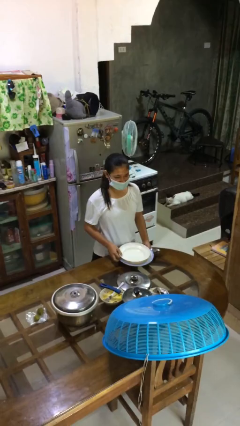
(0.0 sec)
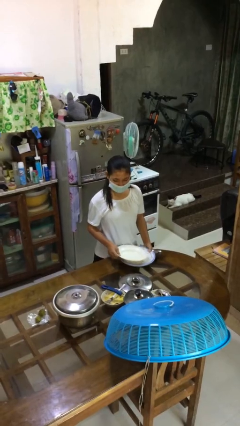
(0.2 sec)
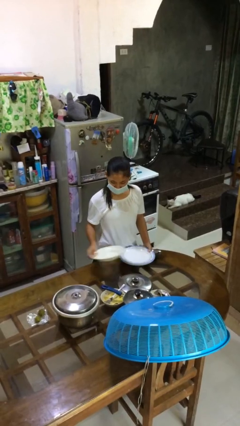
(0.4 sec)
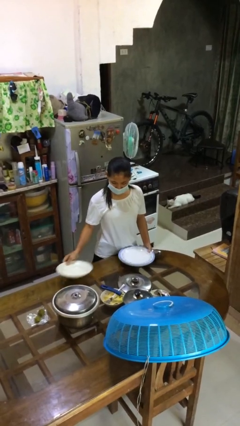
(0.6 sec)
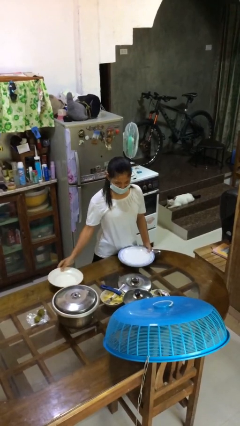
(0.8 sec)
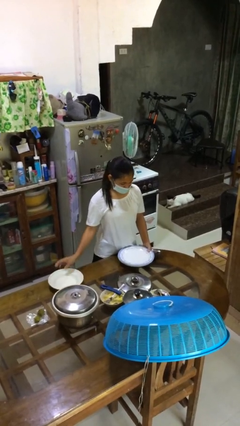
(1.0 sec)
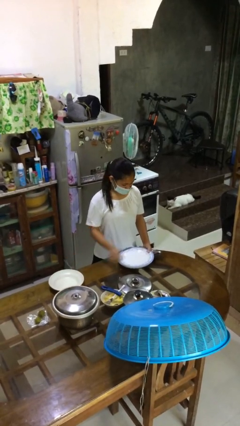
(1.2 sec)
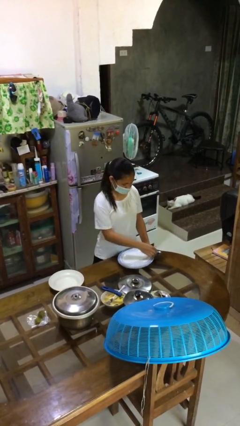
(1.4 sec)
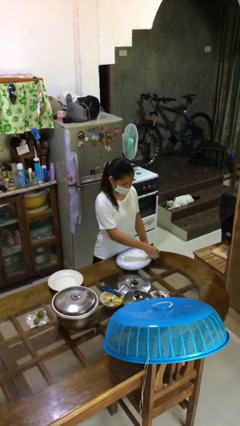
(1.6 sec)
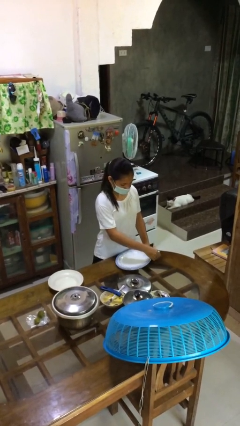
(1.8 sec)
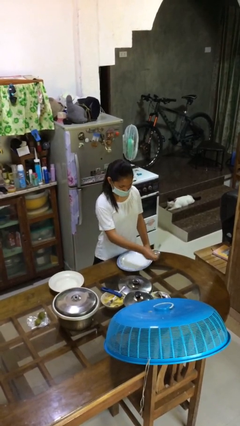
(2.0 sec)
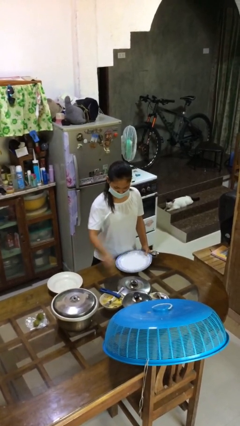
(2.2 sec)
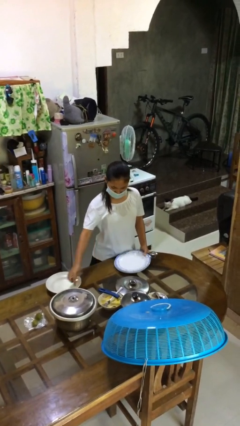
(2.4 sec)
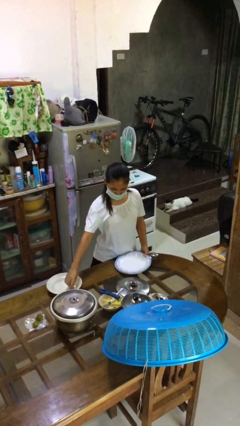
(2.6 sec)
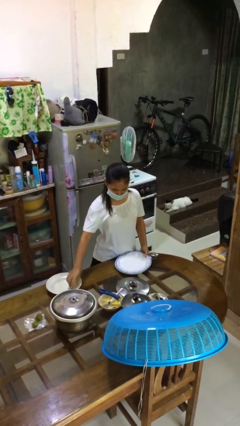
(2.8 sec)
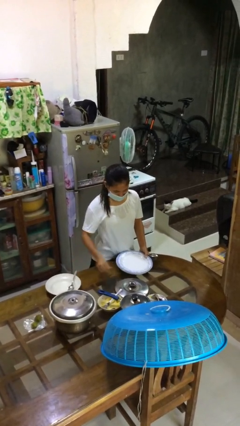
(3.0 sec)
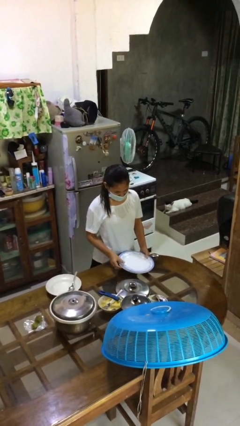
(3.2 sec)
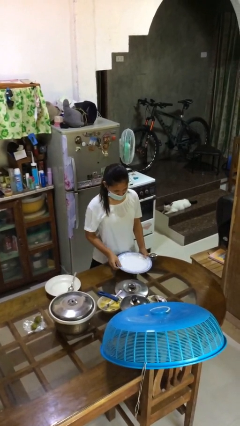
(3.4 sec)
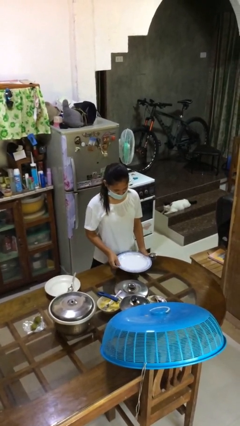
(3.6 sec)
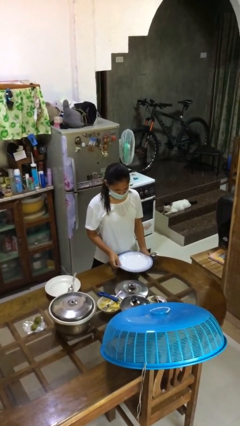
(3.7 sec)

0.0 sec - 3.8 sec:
person sets table

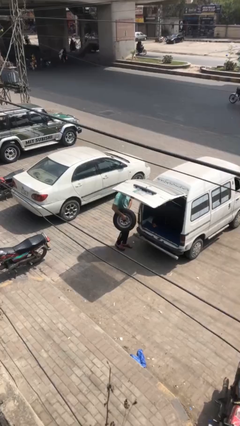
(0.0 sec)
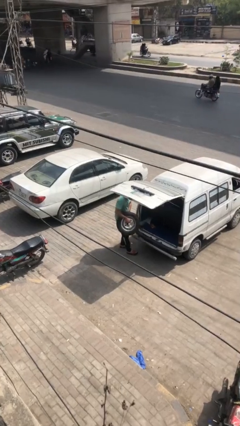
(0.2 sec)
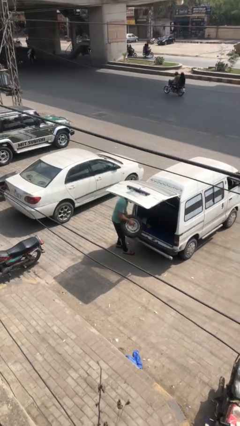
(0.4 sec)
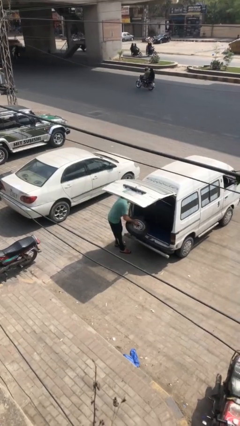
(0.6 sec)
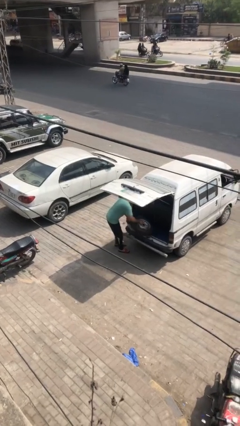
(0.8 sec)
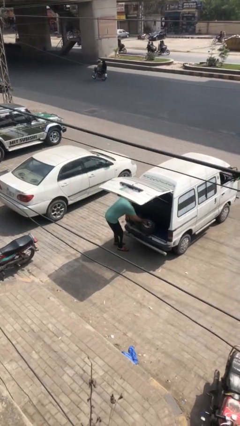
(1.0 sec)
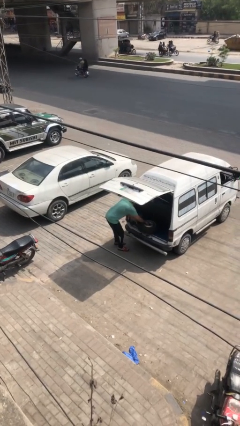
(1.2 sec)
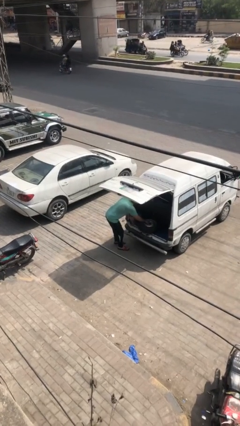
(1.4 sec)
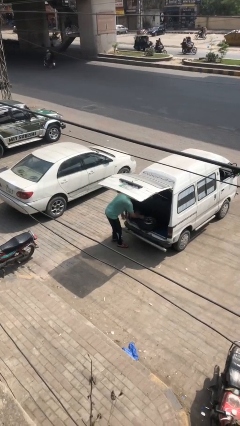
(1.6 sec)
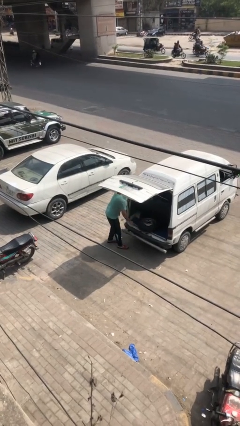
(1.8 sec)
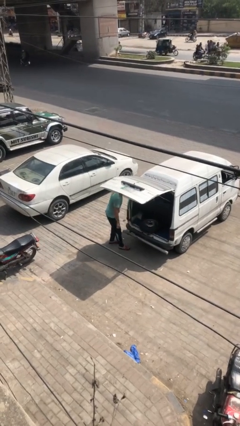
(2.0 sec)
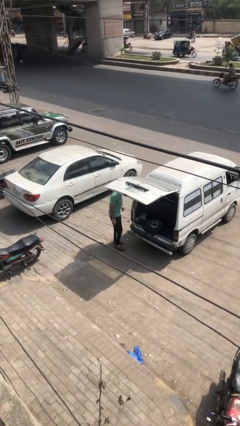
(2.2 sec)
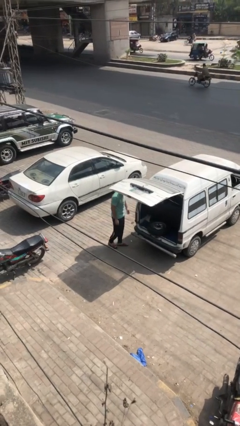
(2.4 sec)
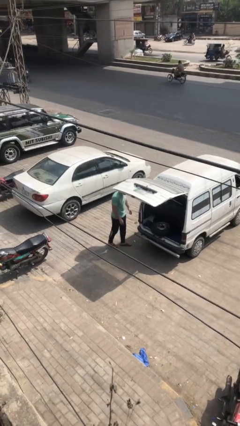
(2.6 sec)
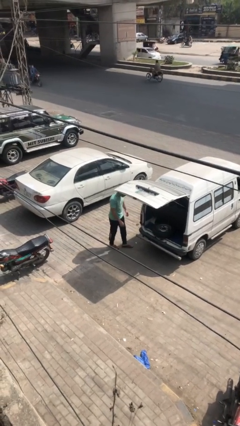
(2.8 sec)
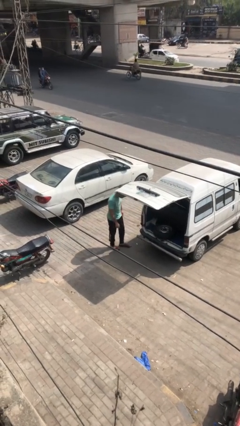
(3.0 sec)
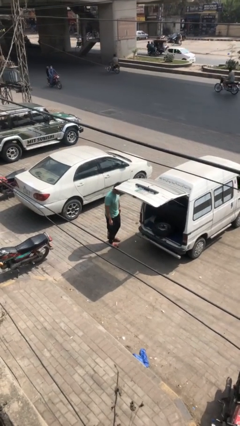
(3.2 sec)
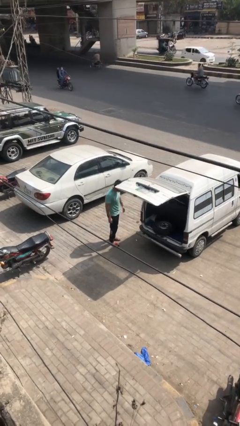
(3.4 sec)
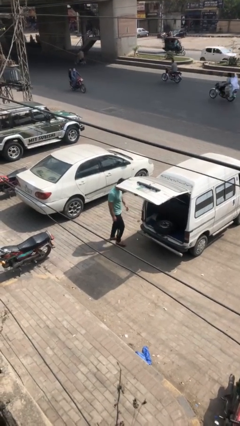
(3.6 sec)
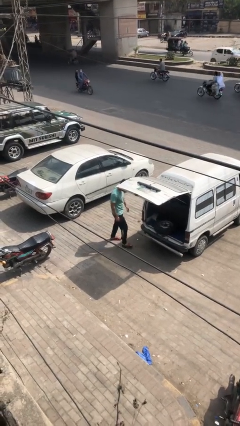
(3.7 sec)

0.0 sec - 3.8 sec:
person loads car

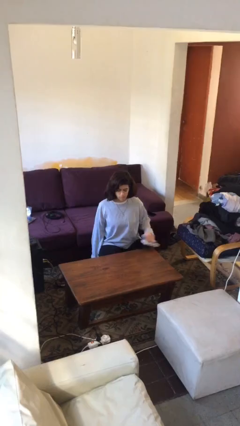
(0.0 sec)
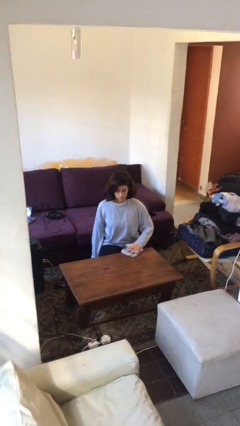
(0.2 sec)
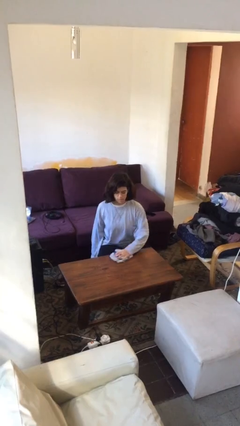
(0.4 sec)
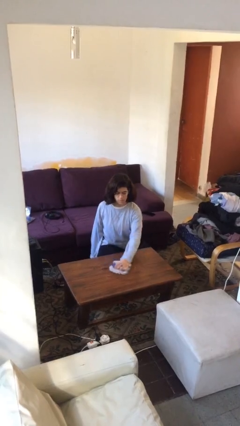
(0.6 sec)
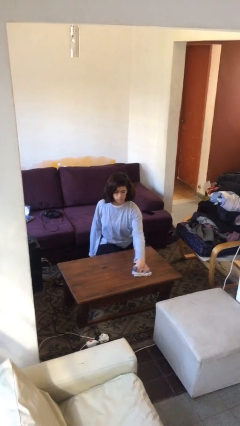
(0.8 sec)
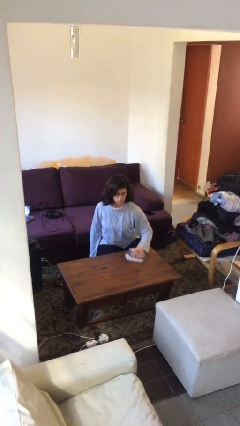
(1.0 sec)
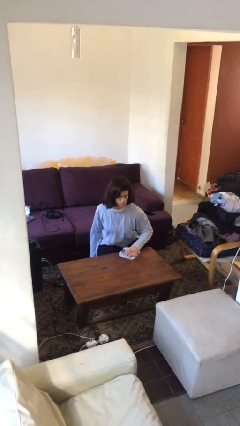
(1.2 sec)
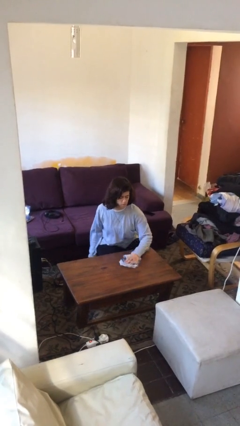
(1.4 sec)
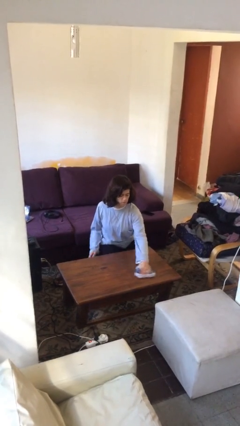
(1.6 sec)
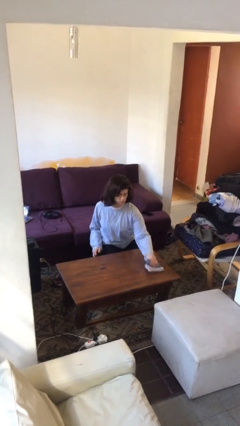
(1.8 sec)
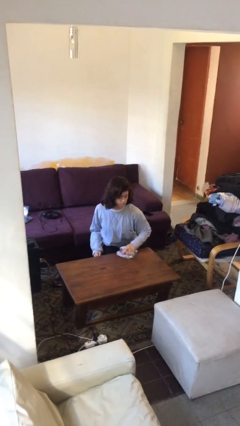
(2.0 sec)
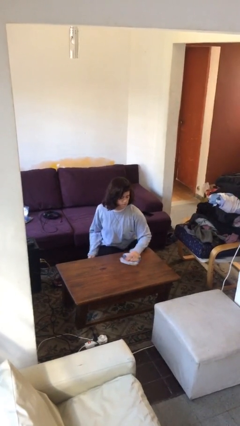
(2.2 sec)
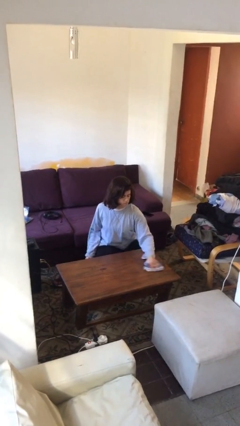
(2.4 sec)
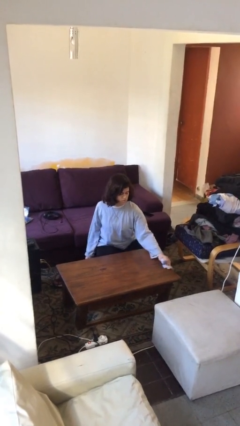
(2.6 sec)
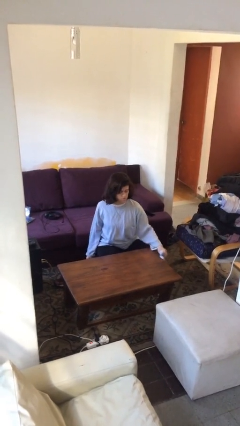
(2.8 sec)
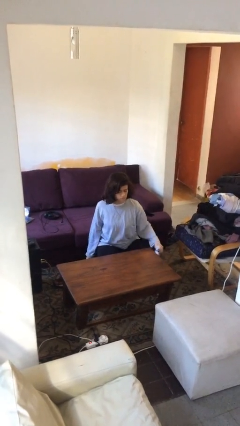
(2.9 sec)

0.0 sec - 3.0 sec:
person cleans table with rag

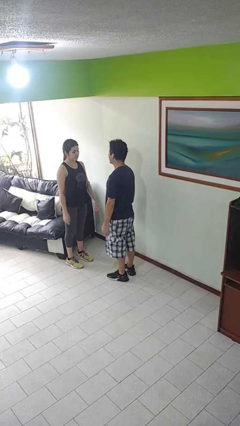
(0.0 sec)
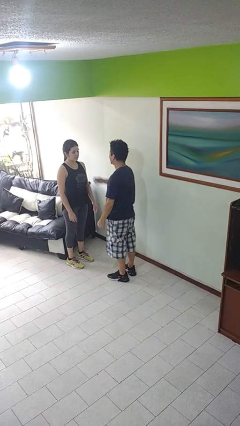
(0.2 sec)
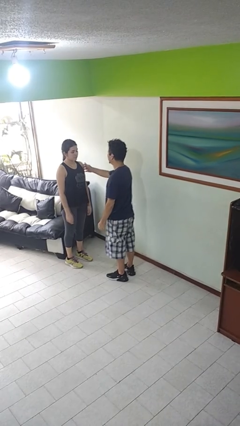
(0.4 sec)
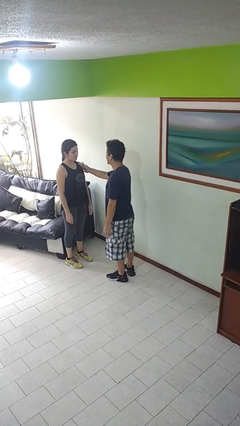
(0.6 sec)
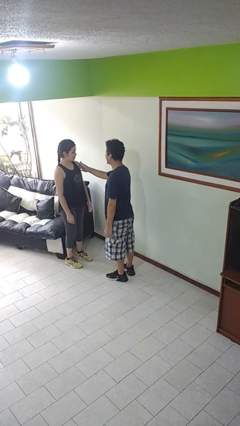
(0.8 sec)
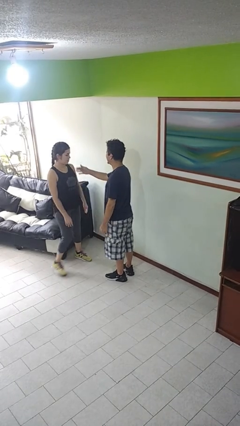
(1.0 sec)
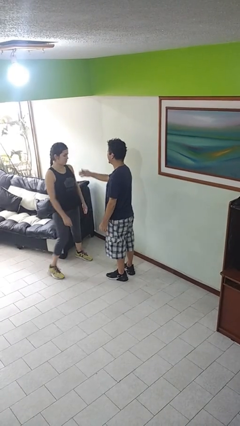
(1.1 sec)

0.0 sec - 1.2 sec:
person shoves person

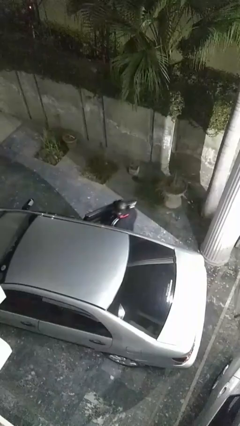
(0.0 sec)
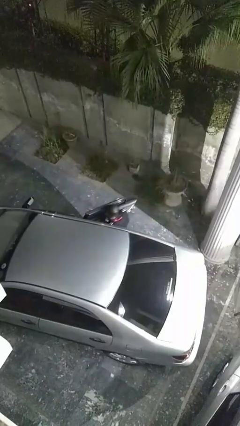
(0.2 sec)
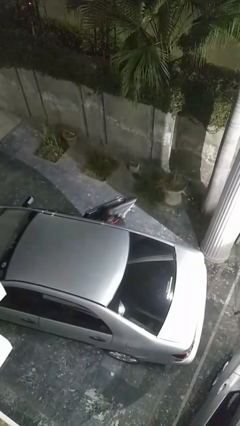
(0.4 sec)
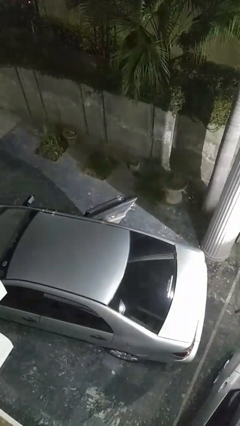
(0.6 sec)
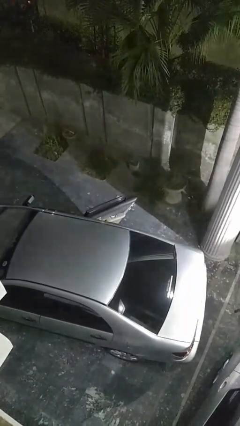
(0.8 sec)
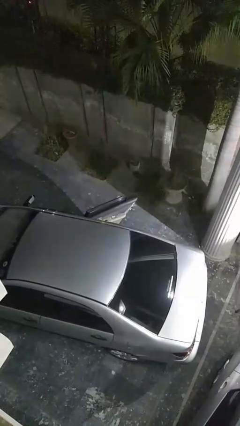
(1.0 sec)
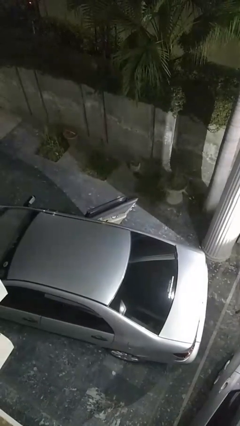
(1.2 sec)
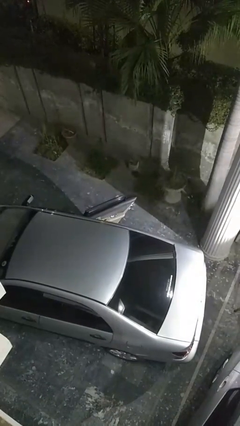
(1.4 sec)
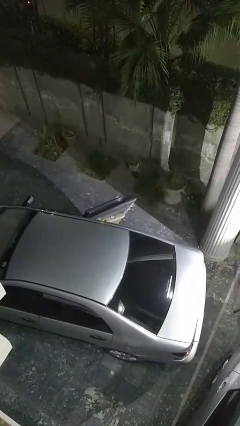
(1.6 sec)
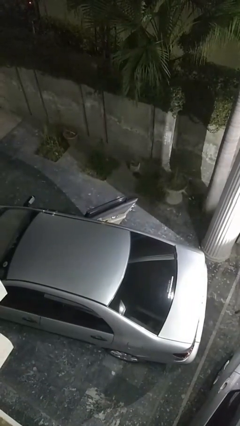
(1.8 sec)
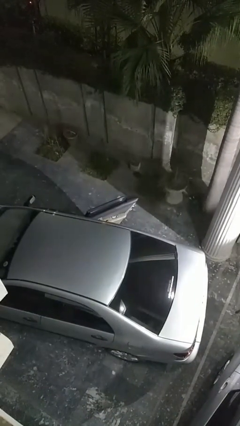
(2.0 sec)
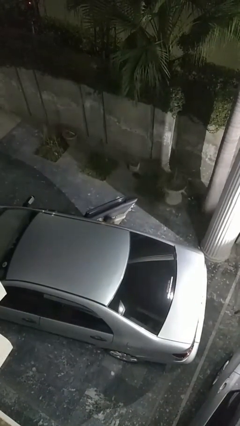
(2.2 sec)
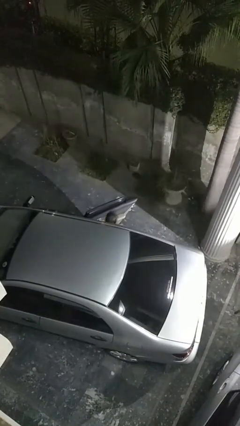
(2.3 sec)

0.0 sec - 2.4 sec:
person enters car

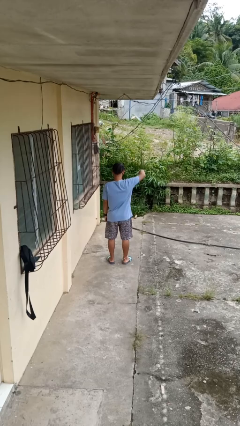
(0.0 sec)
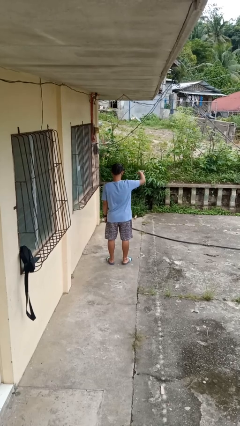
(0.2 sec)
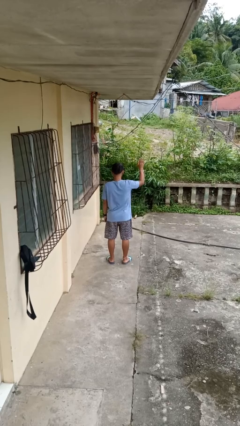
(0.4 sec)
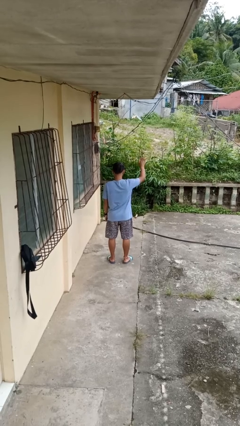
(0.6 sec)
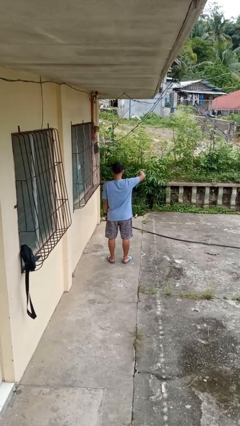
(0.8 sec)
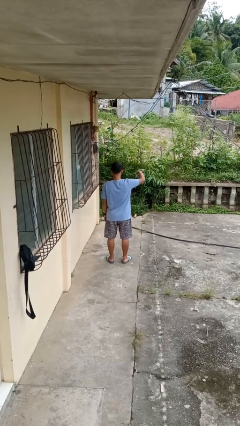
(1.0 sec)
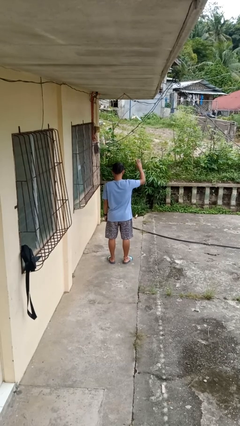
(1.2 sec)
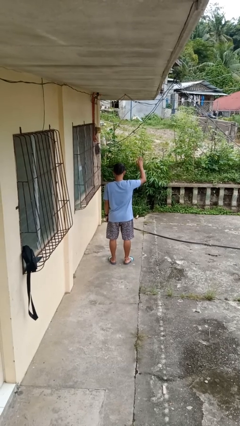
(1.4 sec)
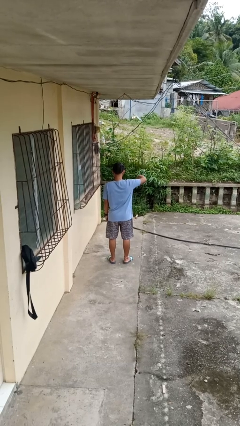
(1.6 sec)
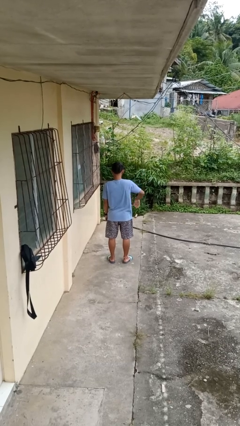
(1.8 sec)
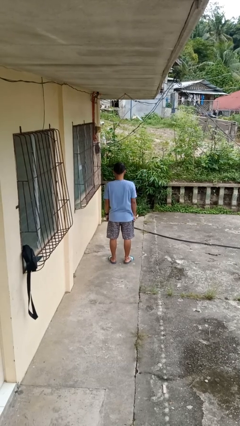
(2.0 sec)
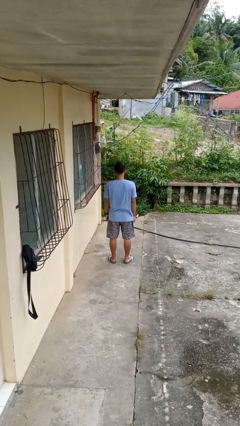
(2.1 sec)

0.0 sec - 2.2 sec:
person gestures come here

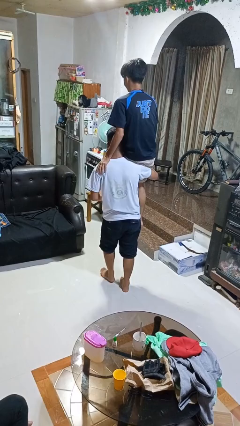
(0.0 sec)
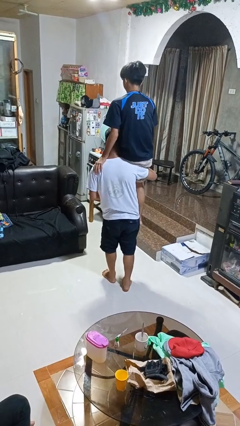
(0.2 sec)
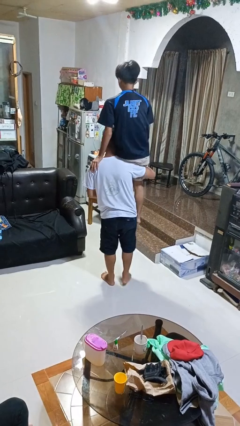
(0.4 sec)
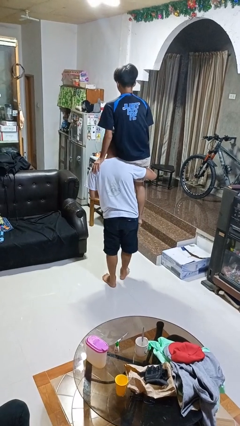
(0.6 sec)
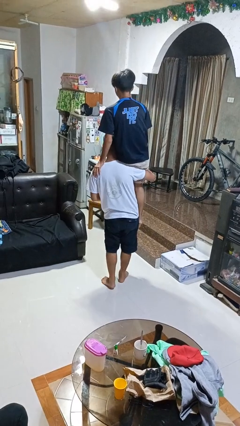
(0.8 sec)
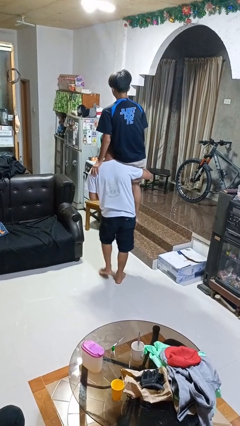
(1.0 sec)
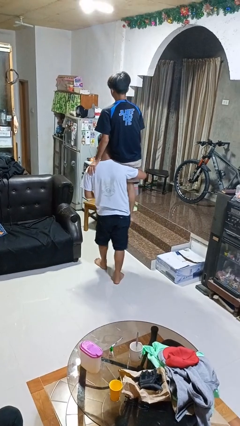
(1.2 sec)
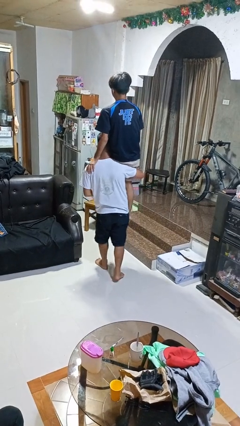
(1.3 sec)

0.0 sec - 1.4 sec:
person carries person on shoulders
